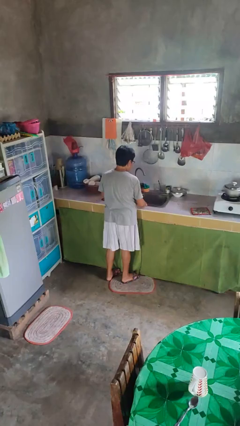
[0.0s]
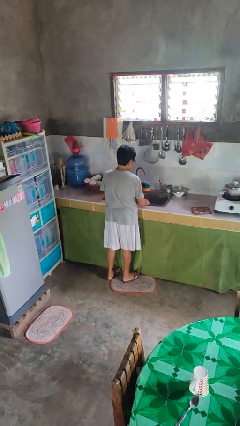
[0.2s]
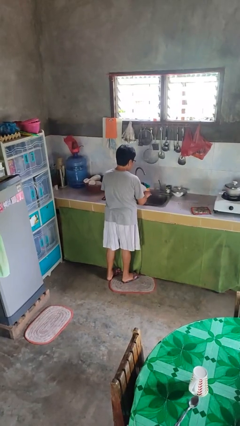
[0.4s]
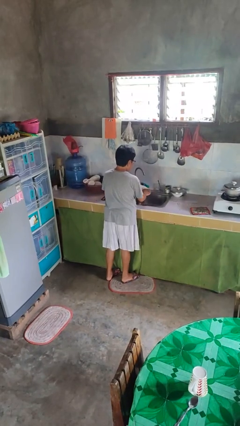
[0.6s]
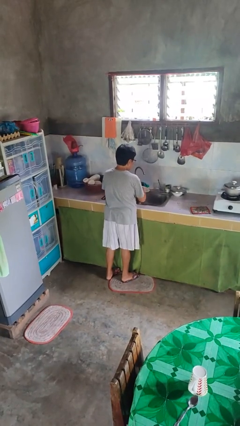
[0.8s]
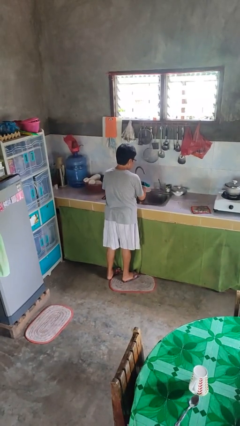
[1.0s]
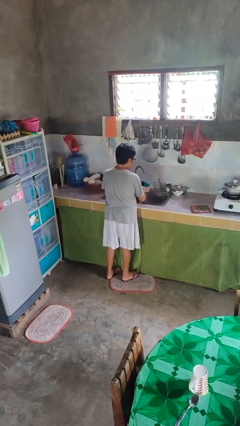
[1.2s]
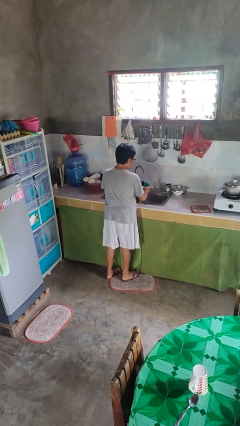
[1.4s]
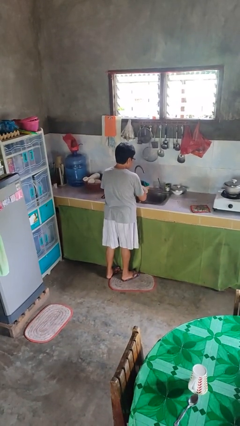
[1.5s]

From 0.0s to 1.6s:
person washes dish

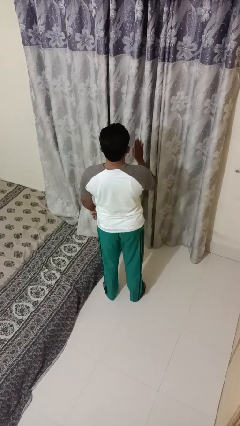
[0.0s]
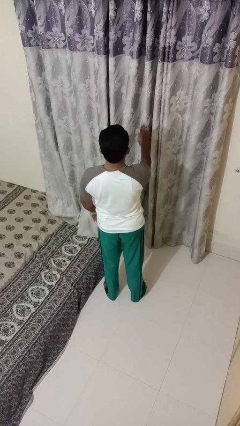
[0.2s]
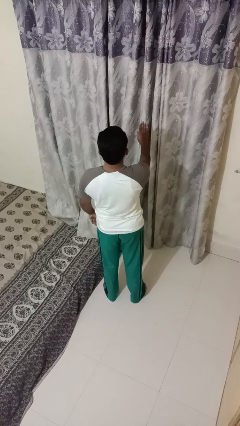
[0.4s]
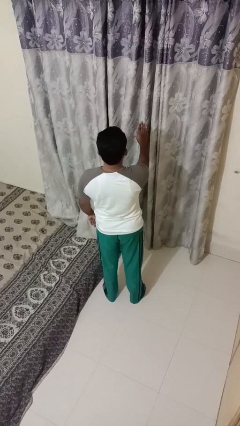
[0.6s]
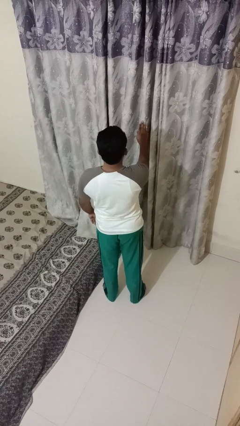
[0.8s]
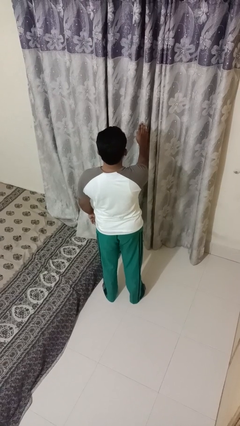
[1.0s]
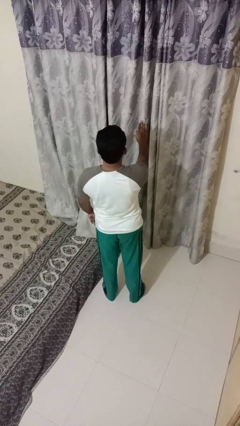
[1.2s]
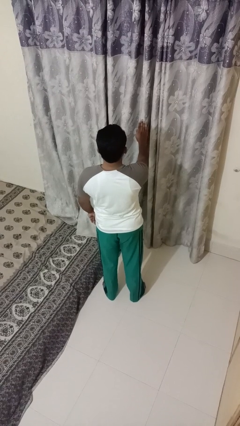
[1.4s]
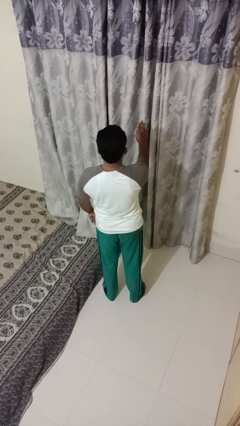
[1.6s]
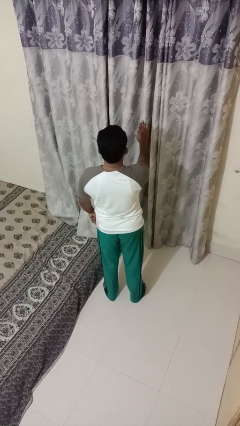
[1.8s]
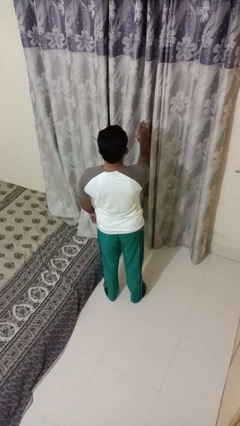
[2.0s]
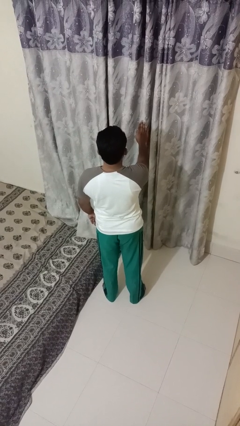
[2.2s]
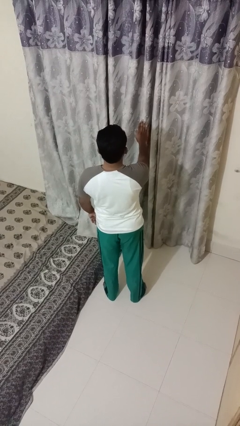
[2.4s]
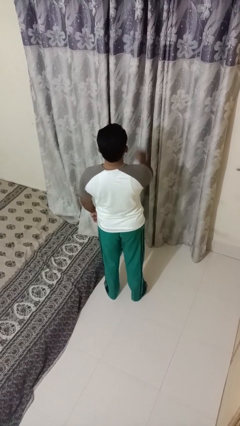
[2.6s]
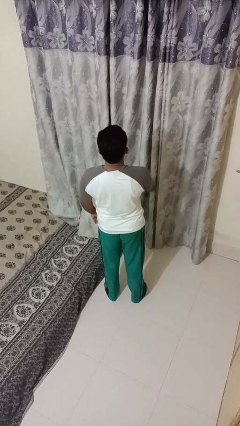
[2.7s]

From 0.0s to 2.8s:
person gestures stop

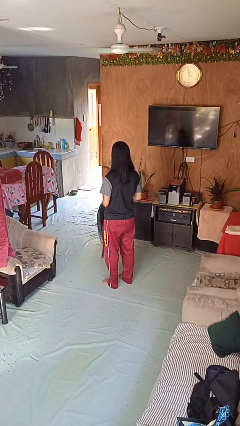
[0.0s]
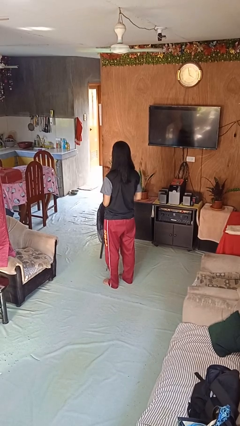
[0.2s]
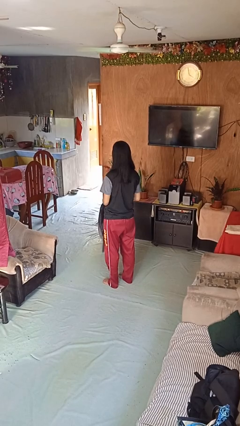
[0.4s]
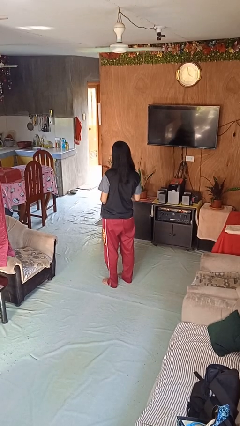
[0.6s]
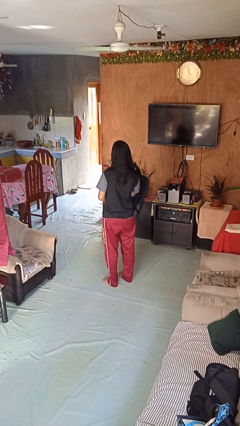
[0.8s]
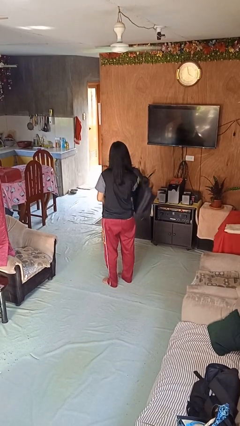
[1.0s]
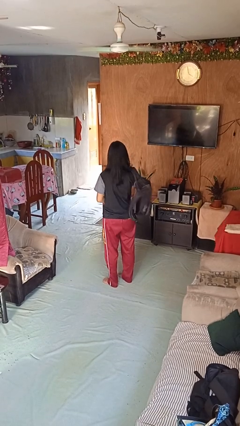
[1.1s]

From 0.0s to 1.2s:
person puts on backpack

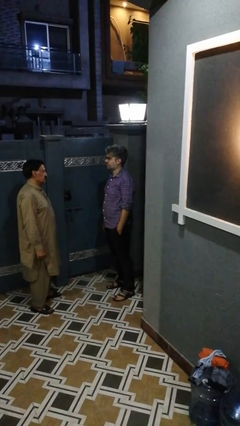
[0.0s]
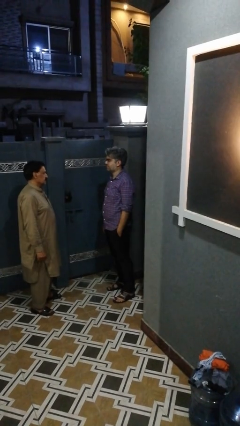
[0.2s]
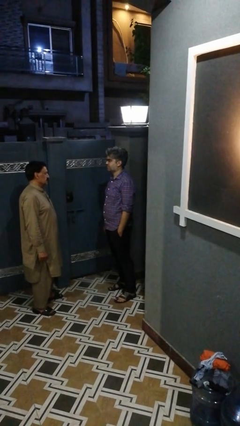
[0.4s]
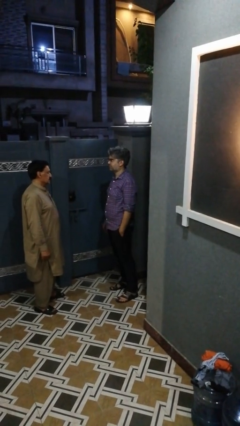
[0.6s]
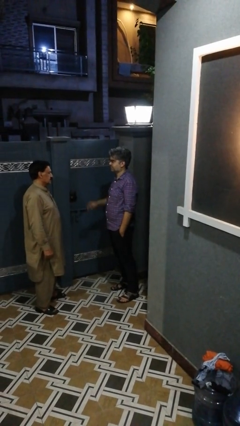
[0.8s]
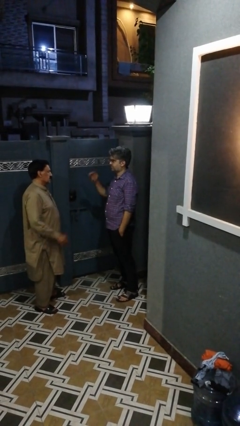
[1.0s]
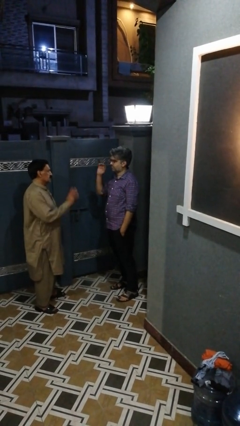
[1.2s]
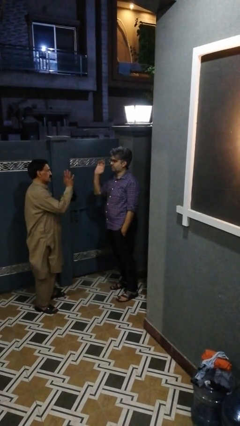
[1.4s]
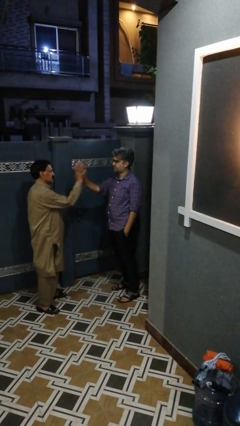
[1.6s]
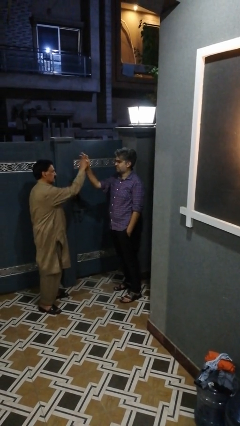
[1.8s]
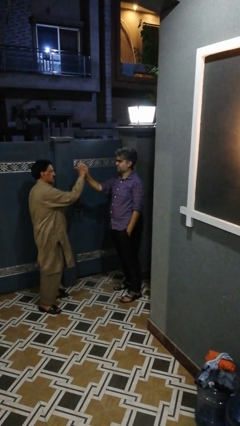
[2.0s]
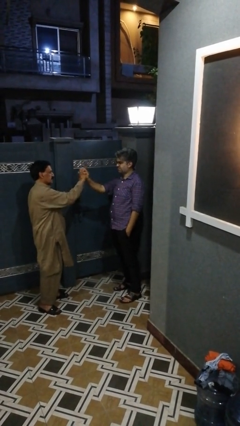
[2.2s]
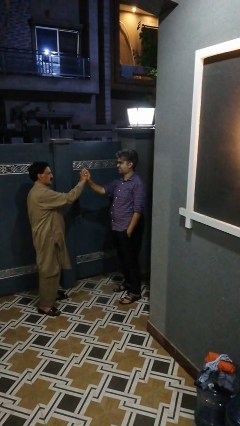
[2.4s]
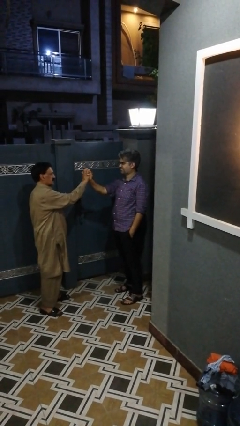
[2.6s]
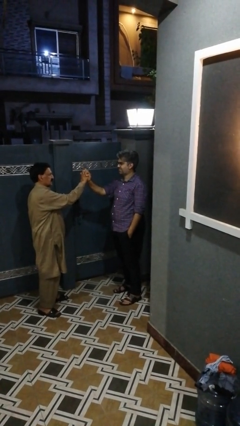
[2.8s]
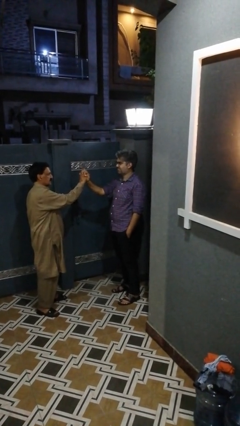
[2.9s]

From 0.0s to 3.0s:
person highfives hand

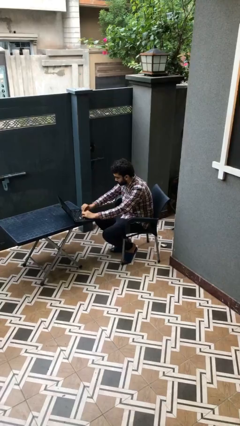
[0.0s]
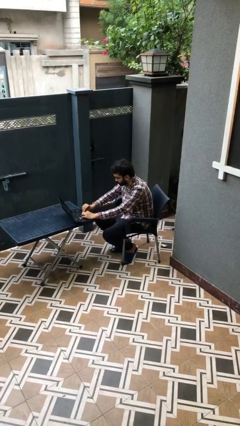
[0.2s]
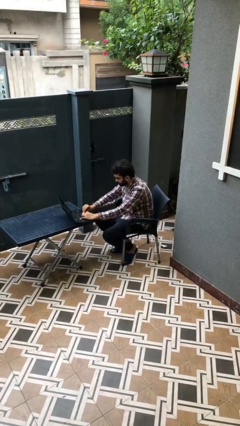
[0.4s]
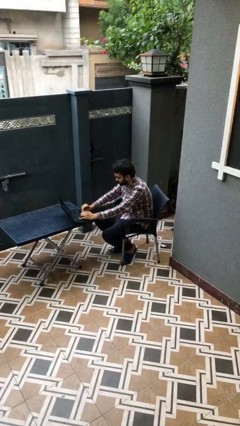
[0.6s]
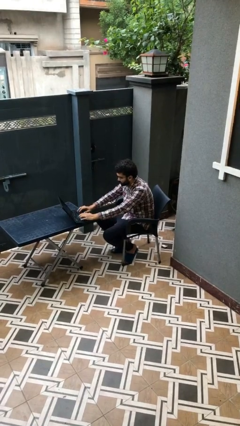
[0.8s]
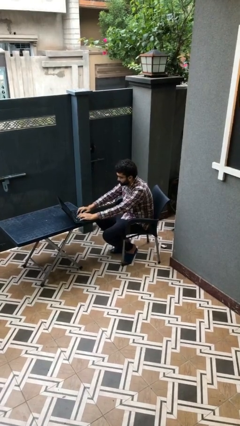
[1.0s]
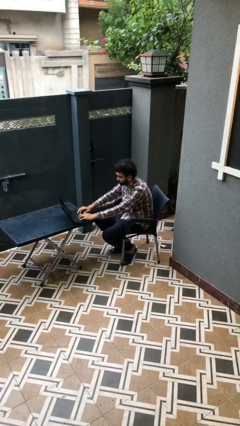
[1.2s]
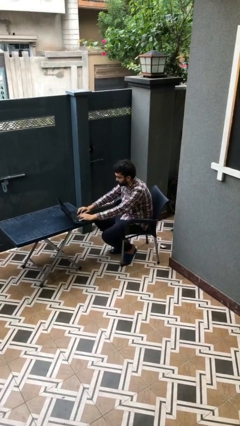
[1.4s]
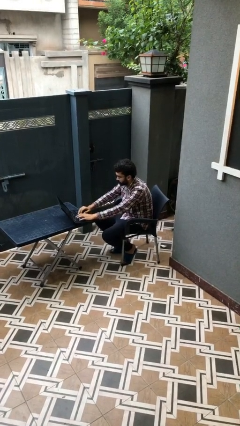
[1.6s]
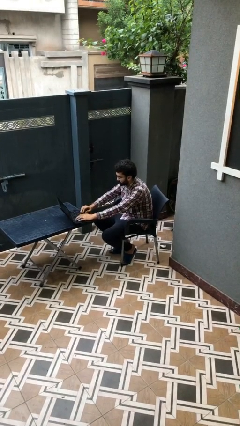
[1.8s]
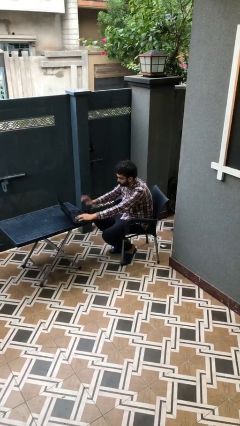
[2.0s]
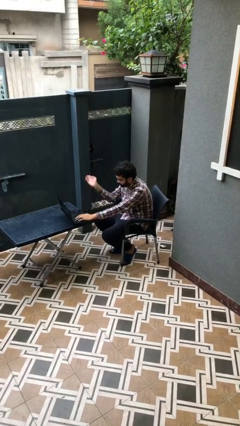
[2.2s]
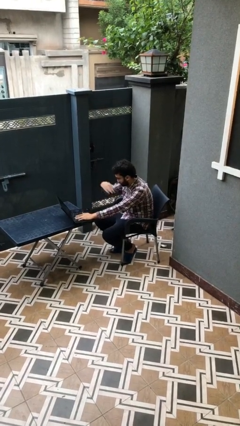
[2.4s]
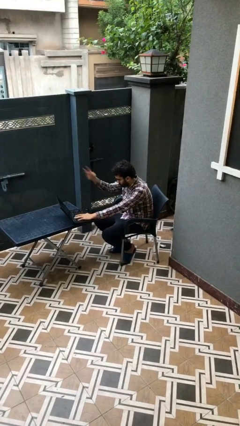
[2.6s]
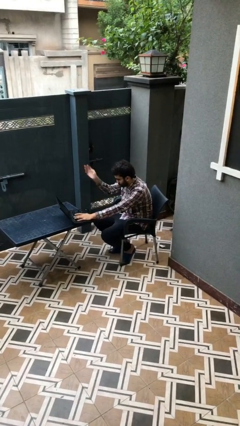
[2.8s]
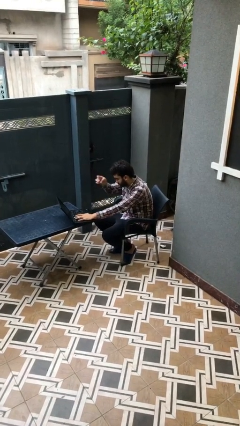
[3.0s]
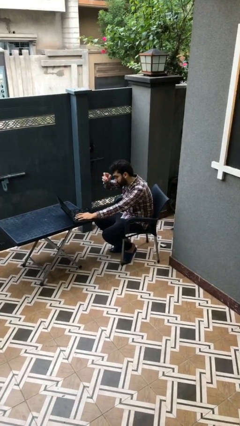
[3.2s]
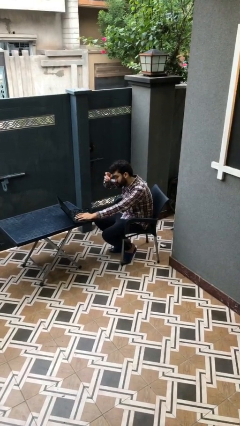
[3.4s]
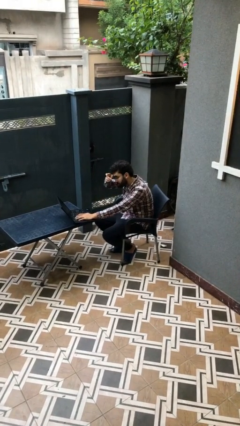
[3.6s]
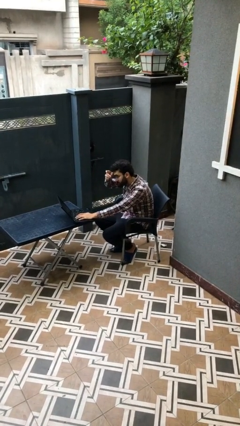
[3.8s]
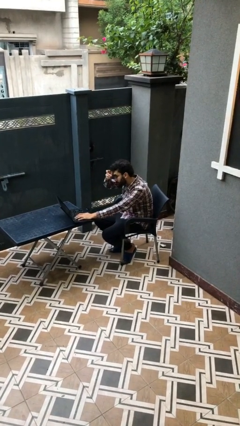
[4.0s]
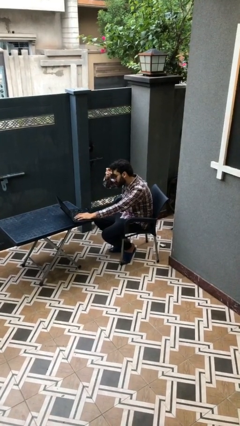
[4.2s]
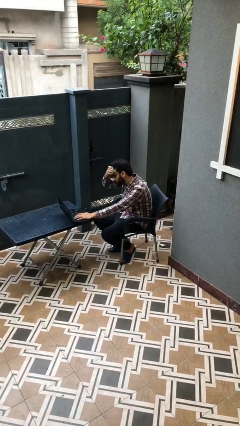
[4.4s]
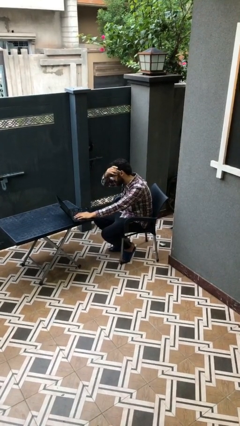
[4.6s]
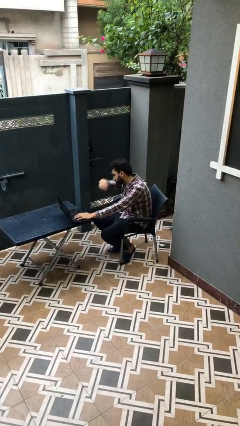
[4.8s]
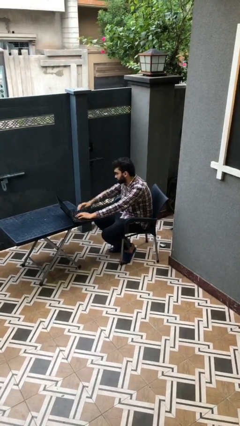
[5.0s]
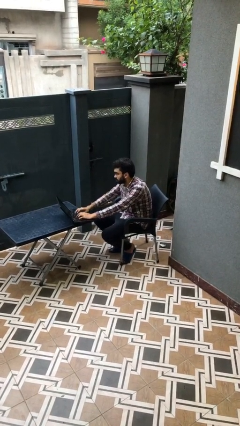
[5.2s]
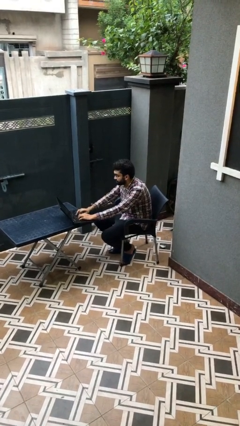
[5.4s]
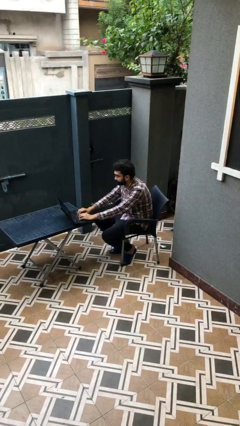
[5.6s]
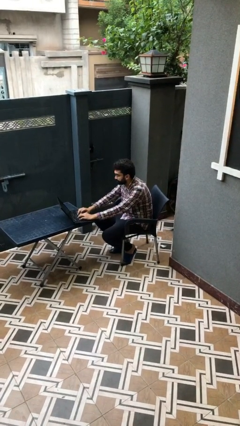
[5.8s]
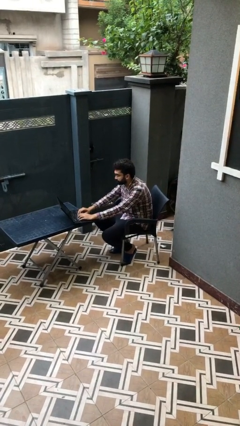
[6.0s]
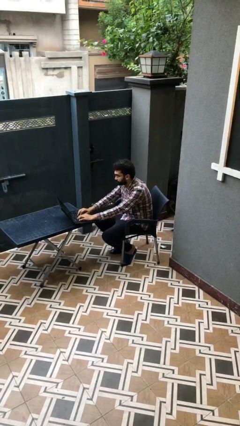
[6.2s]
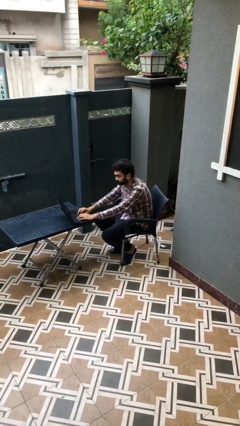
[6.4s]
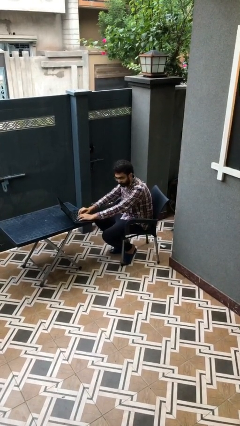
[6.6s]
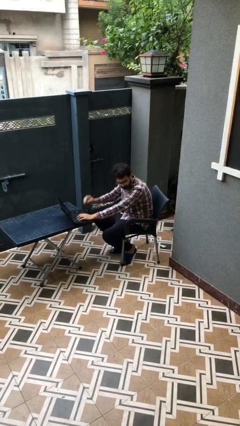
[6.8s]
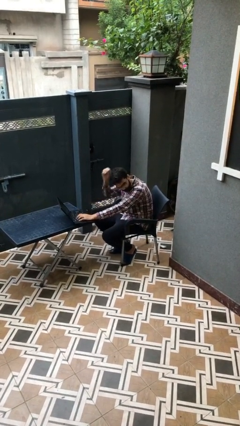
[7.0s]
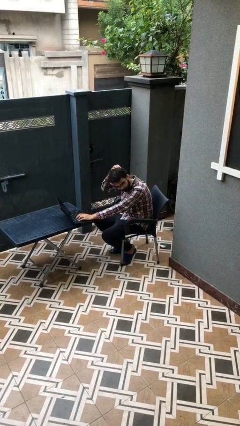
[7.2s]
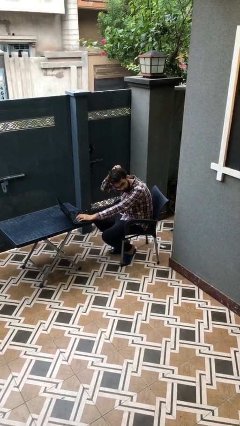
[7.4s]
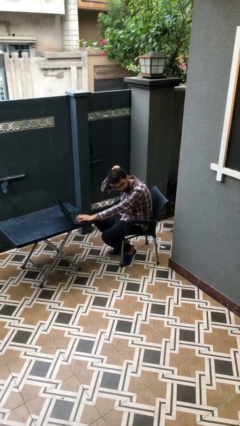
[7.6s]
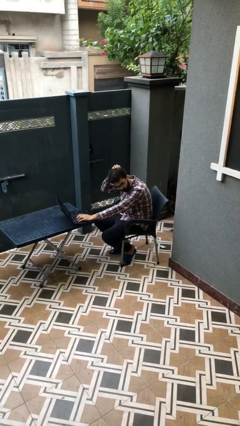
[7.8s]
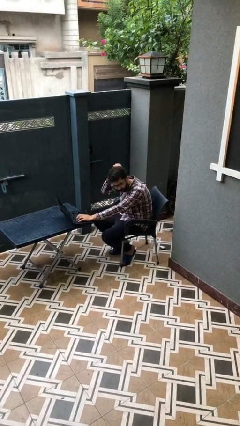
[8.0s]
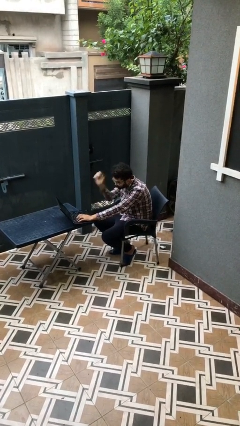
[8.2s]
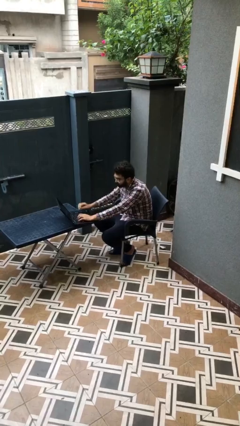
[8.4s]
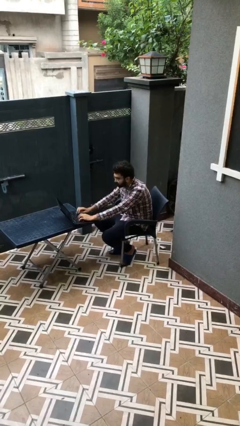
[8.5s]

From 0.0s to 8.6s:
person interacts with laptop

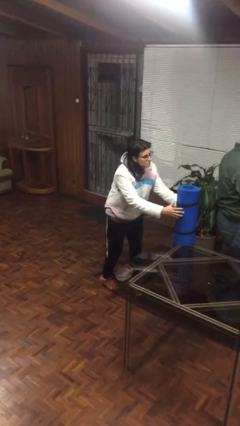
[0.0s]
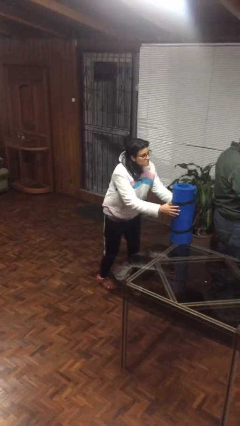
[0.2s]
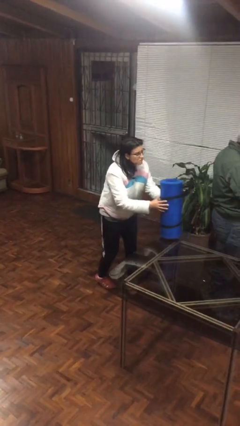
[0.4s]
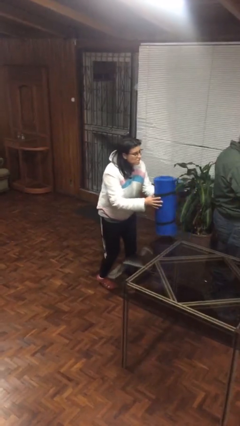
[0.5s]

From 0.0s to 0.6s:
person steals object from person
